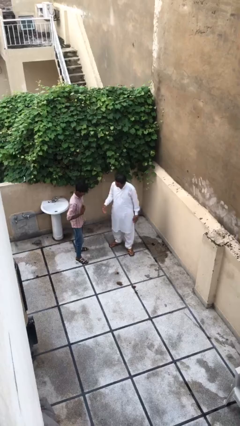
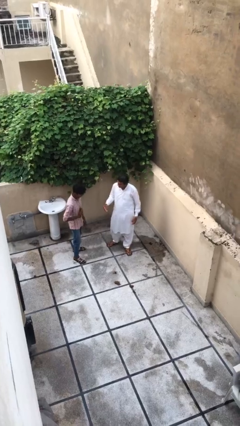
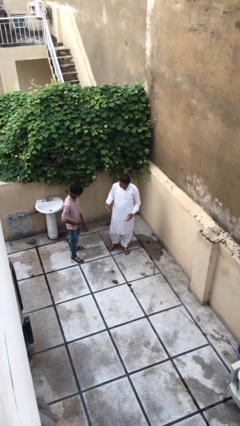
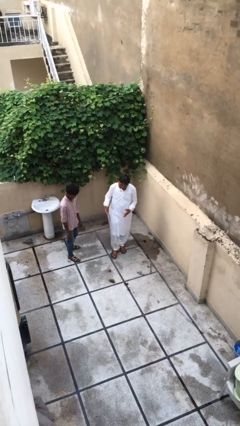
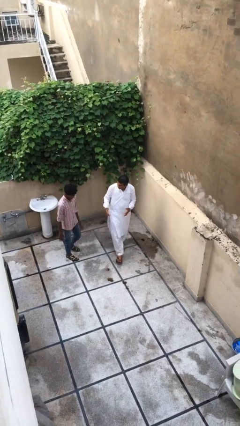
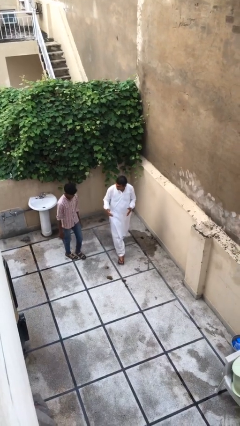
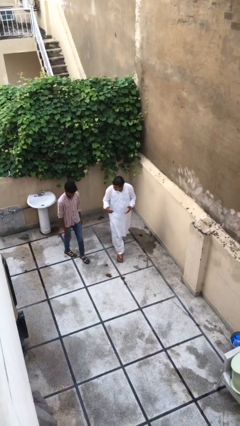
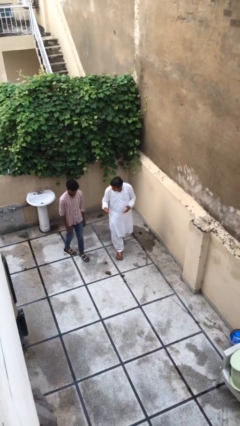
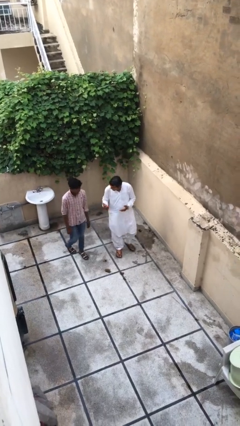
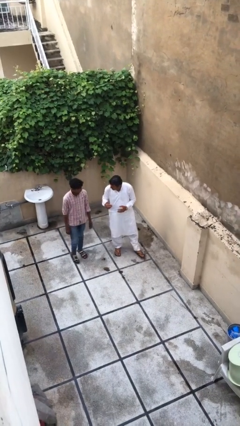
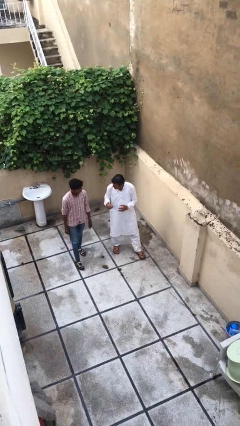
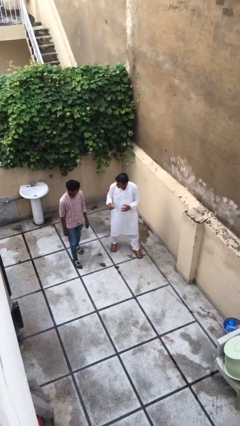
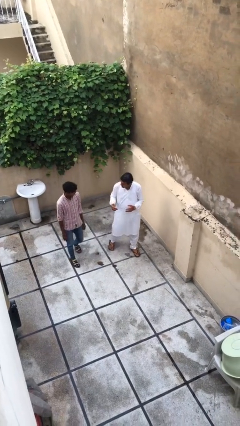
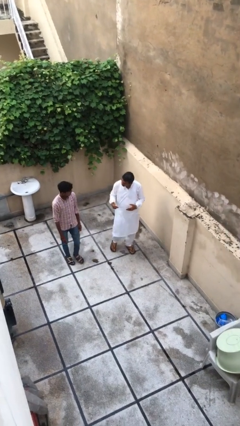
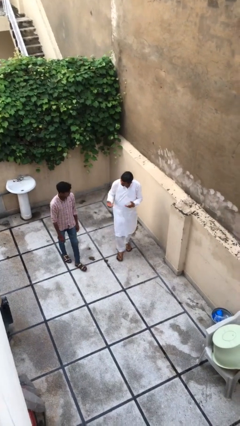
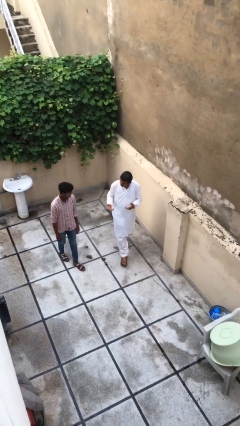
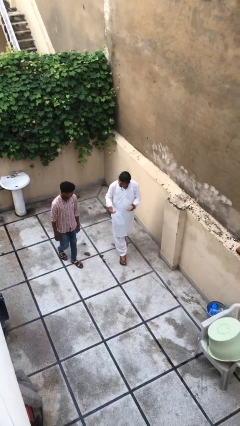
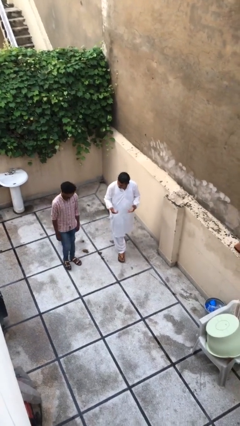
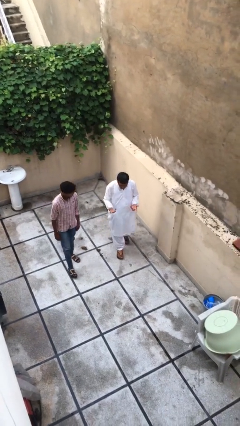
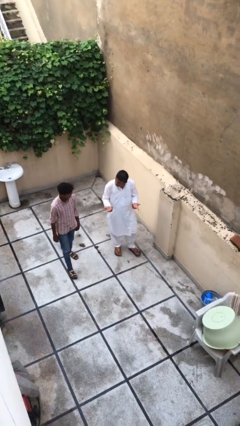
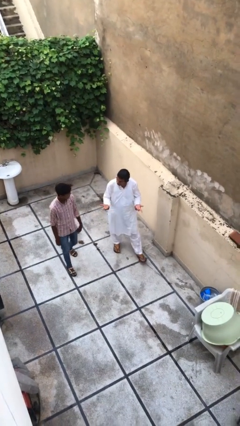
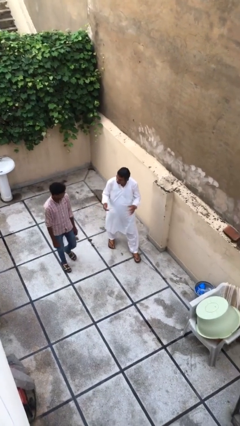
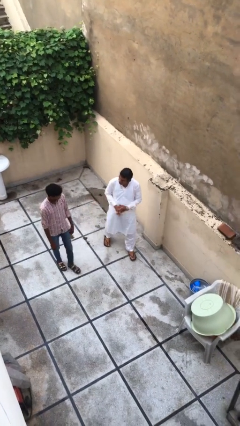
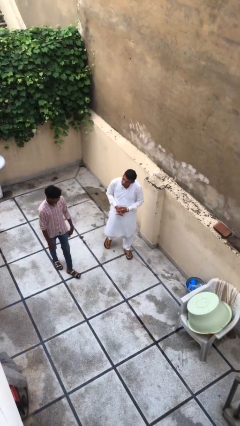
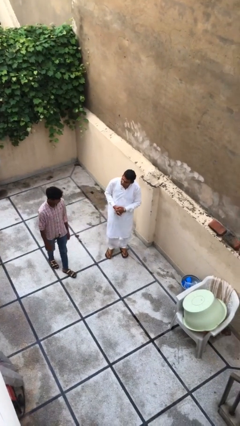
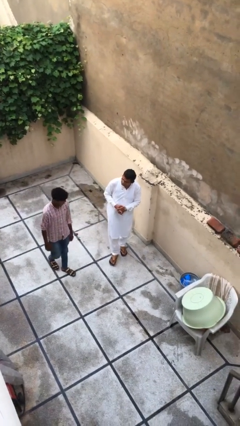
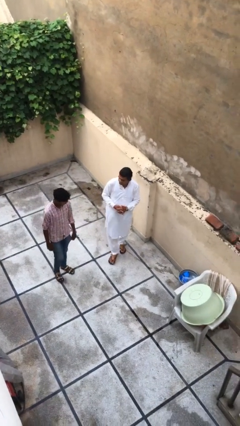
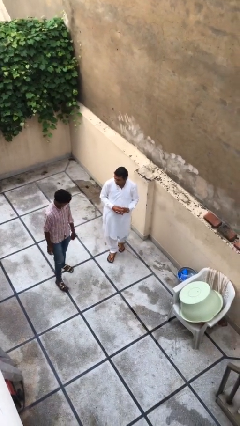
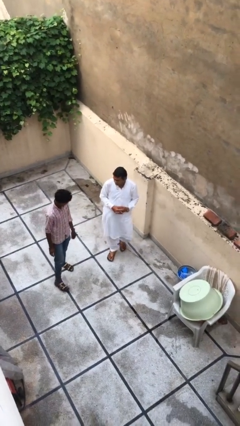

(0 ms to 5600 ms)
person talks to person

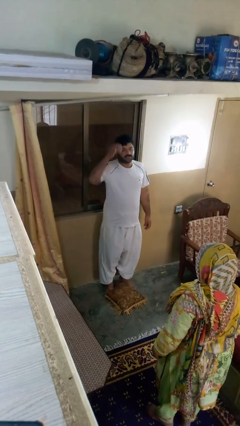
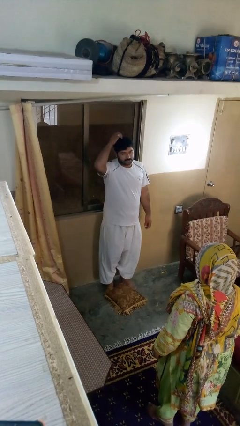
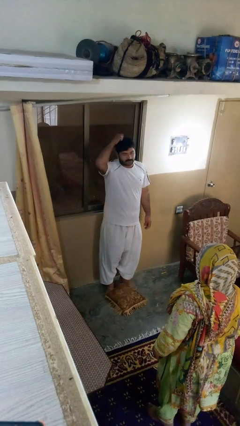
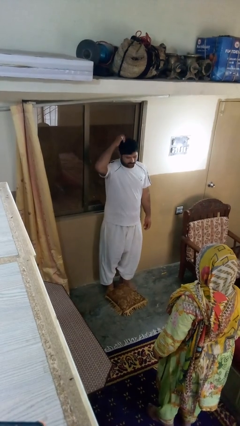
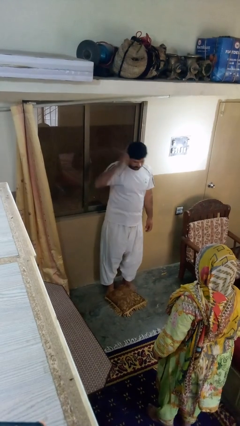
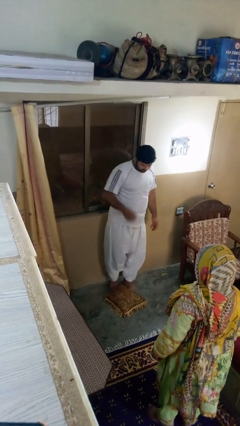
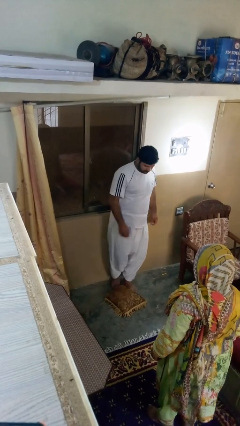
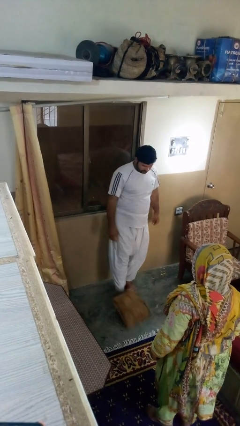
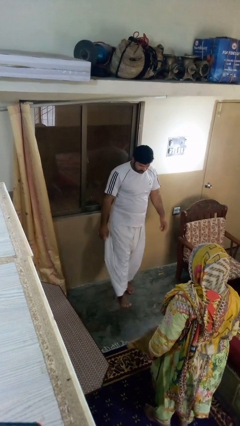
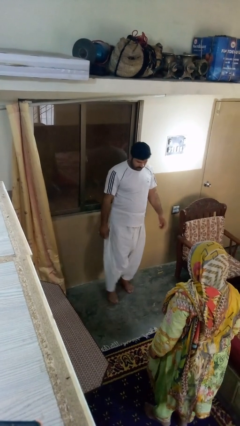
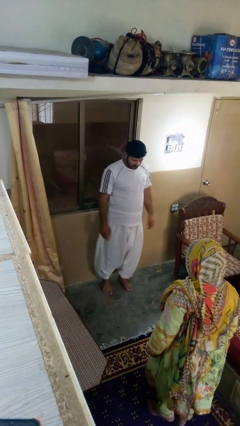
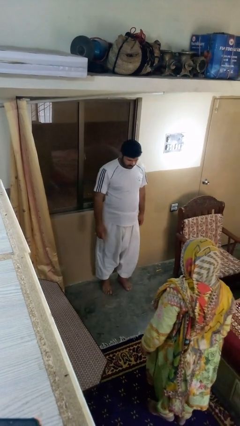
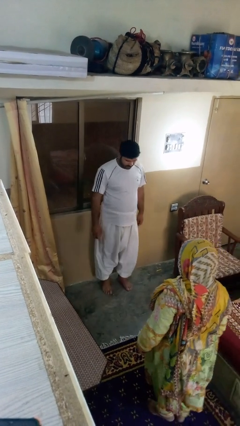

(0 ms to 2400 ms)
person kicks object to person

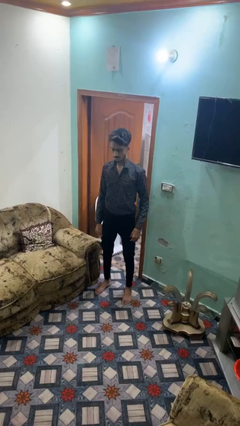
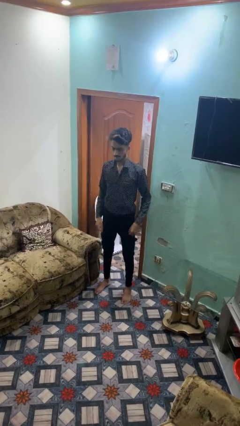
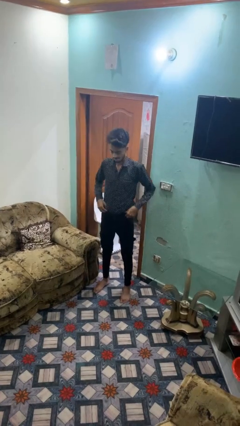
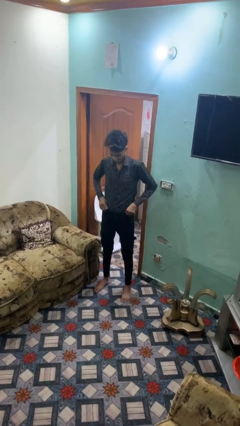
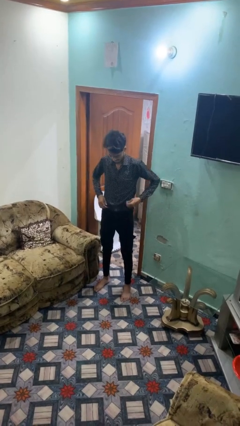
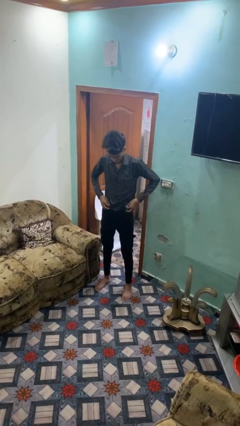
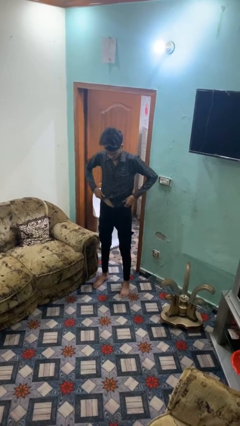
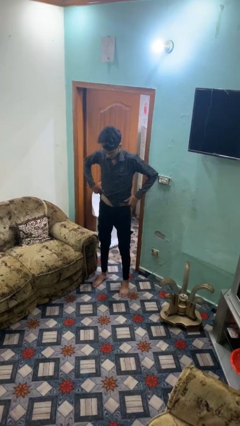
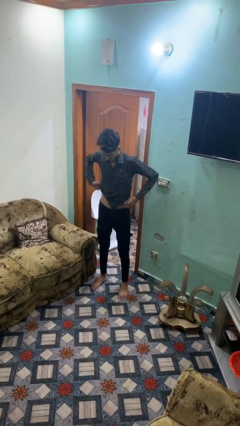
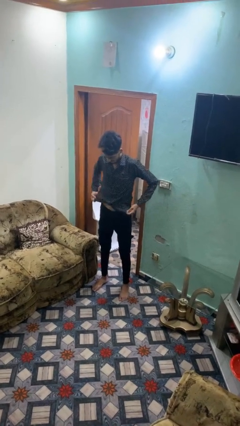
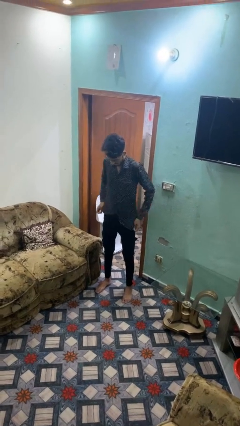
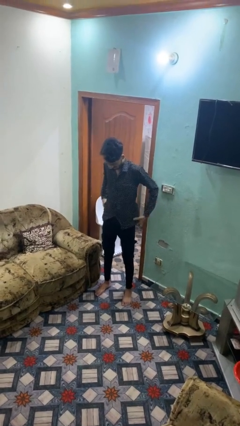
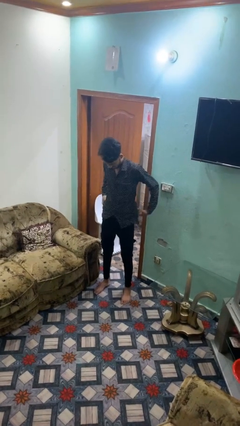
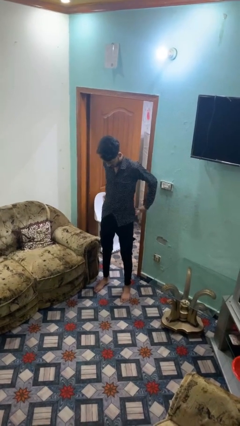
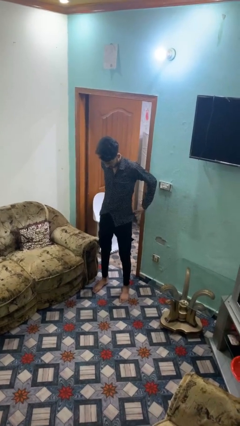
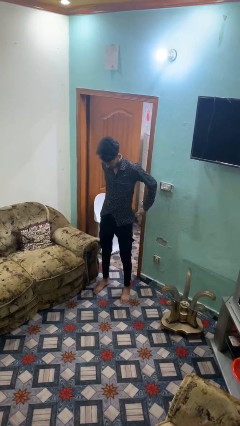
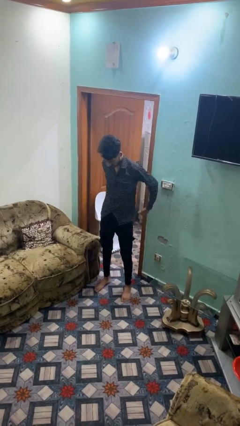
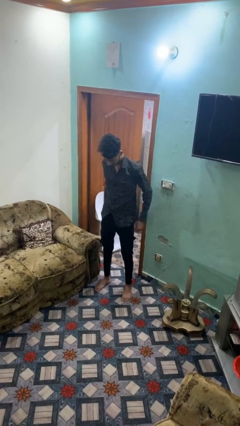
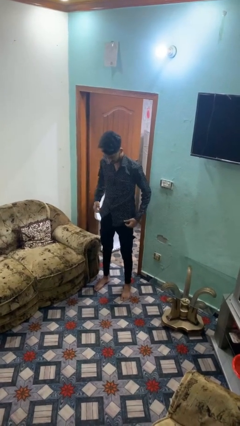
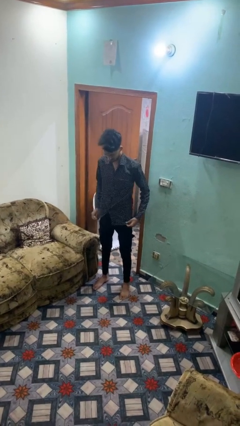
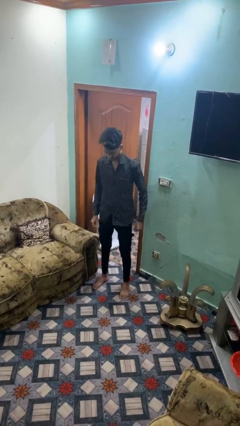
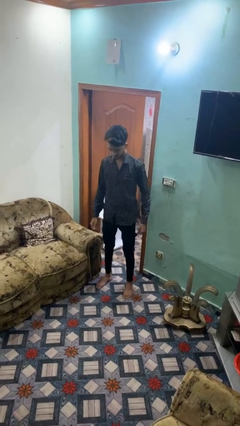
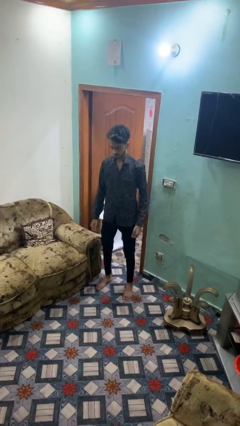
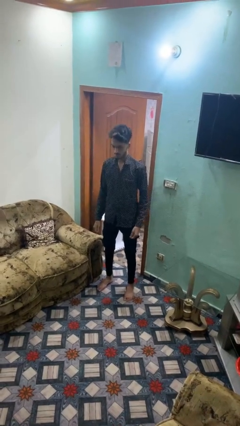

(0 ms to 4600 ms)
person untucks shirt

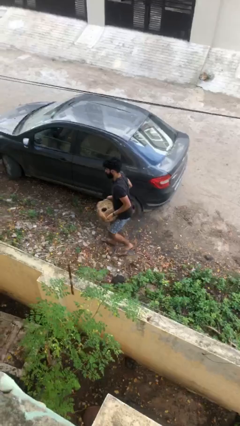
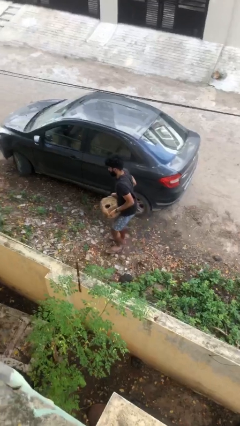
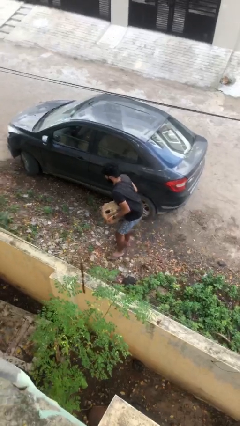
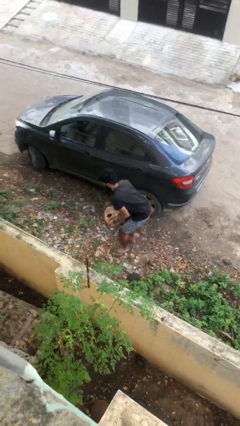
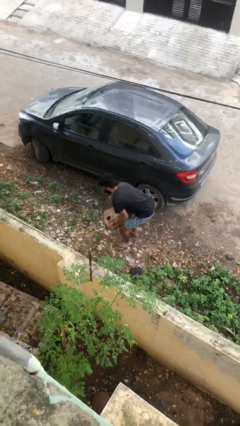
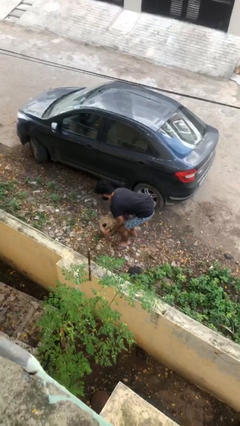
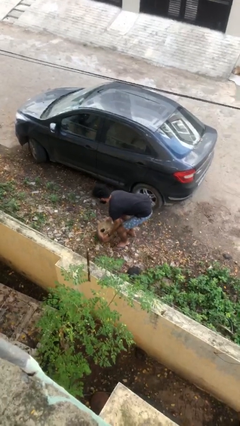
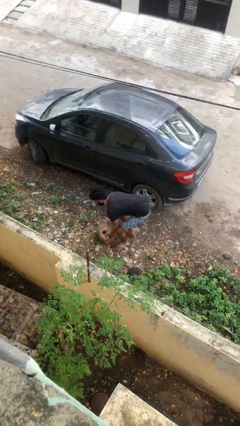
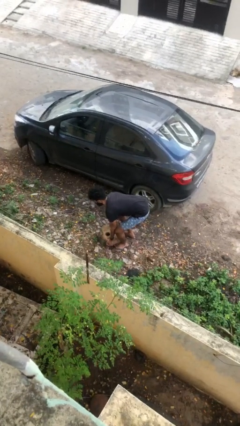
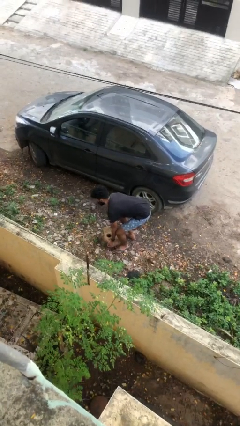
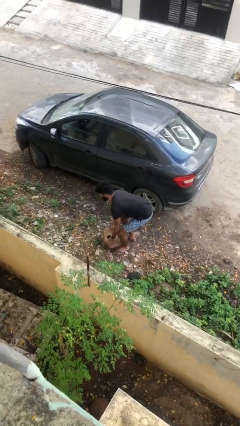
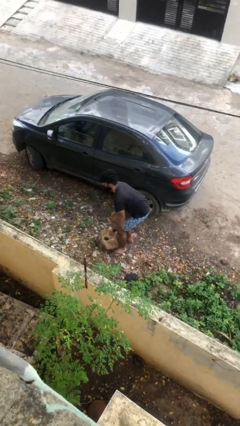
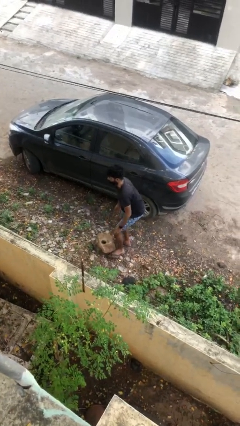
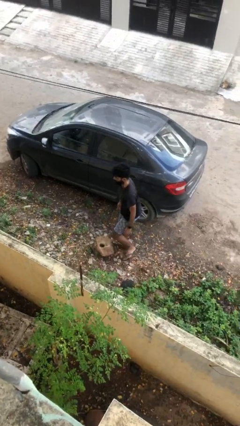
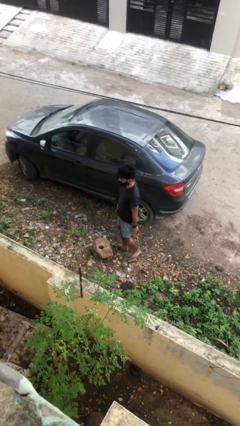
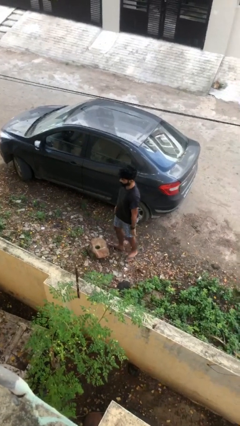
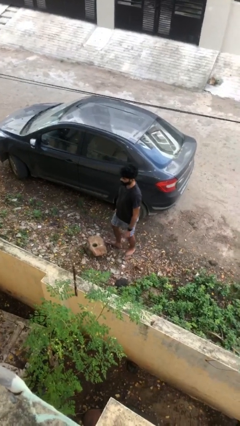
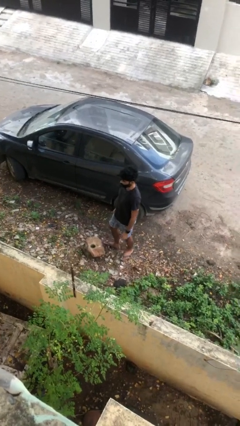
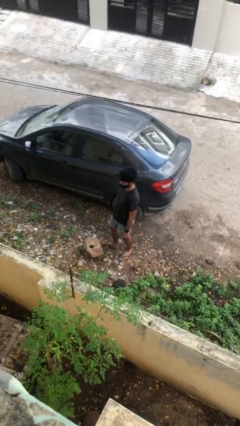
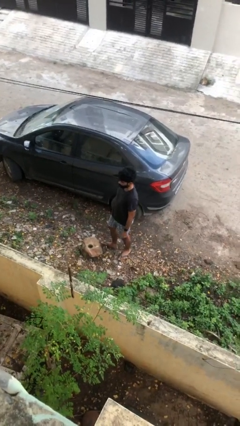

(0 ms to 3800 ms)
person puts down object on floor

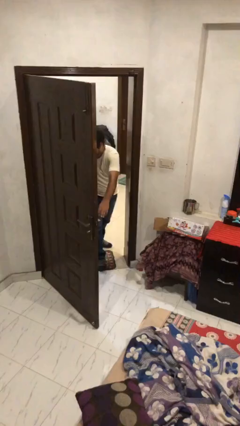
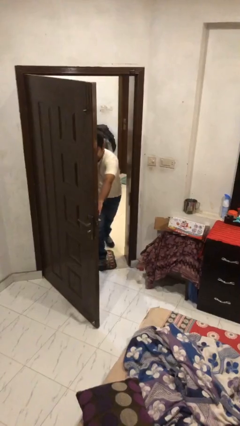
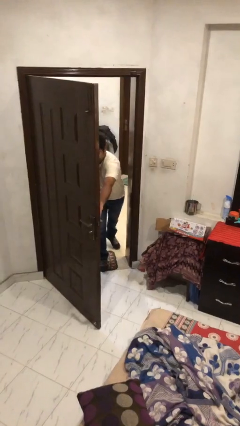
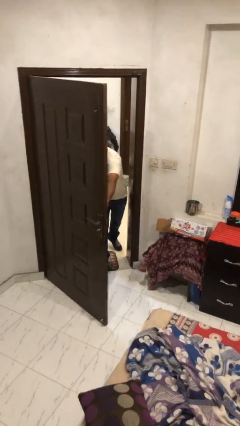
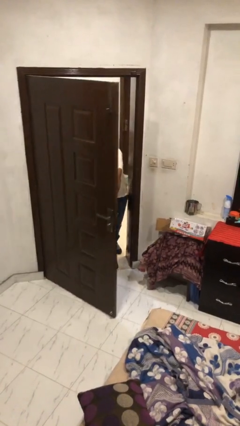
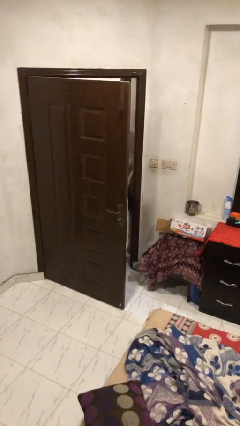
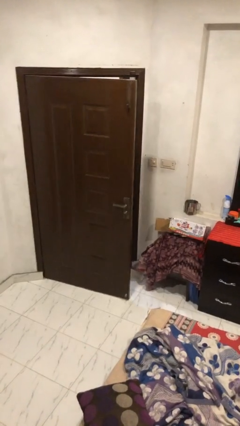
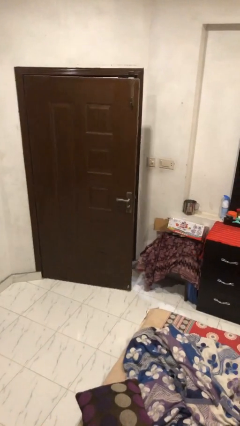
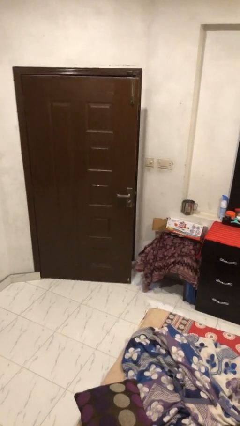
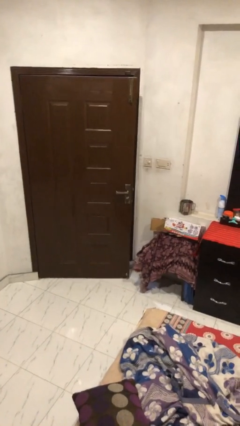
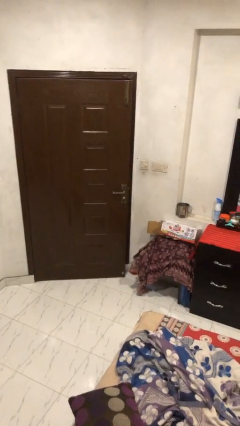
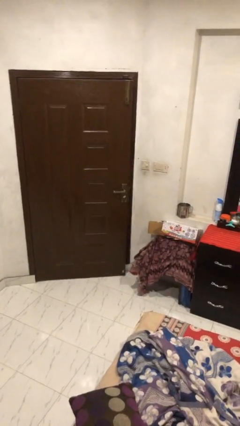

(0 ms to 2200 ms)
person closes facility door
